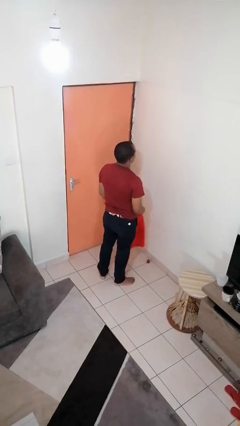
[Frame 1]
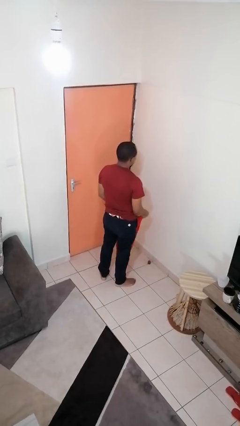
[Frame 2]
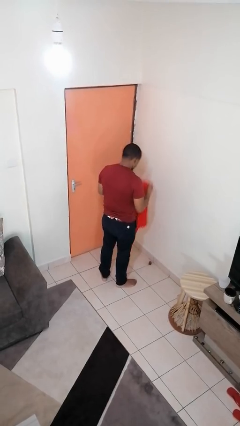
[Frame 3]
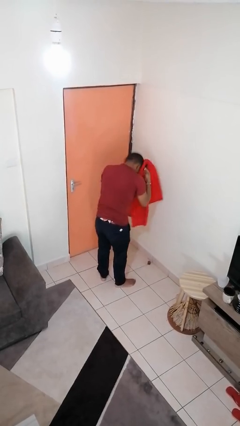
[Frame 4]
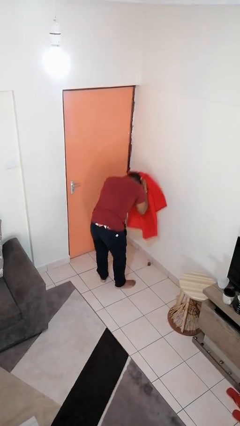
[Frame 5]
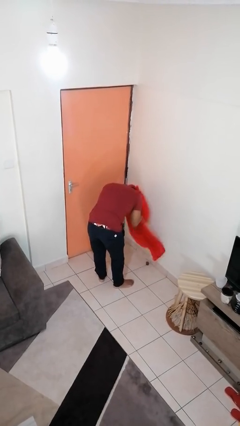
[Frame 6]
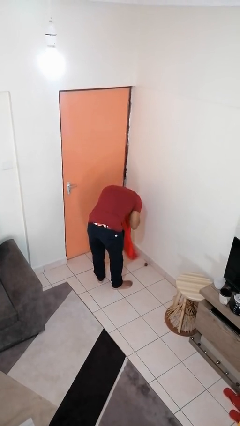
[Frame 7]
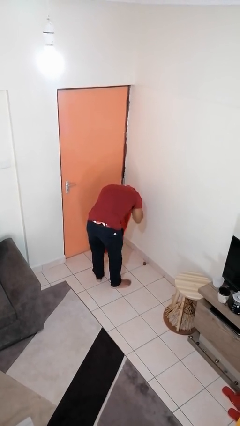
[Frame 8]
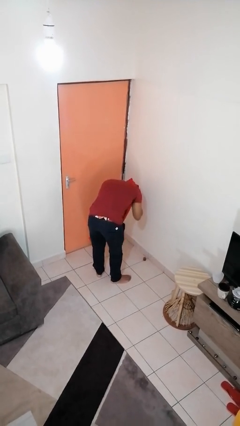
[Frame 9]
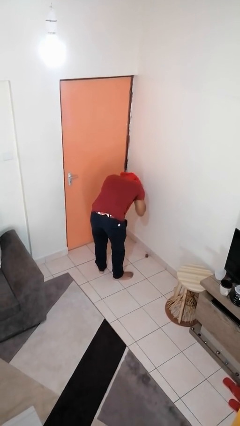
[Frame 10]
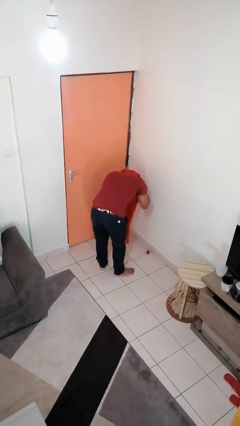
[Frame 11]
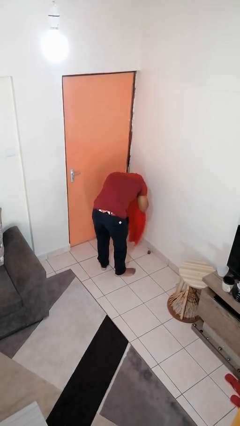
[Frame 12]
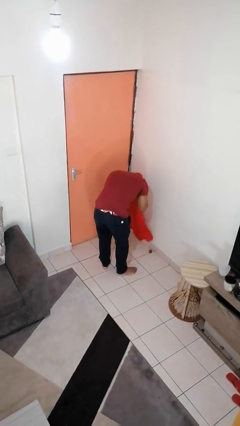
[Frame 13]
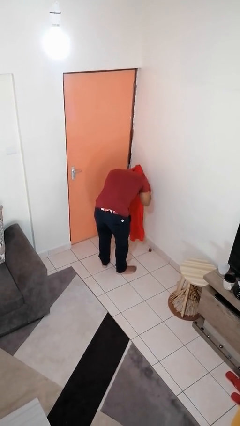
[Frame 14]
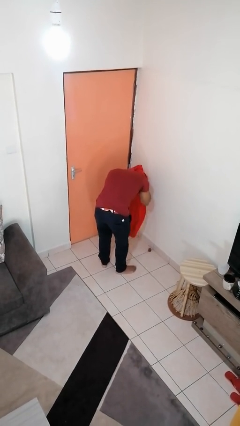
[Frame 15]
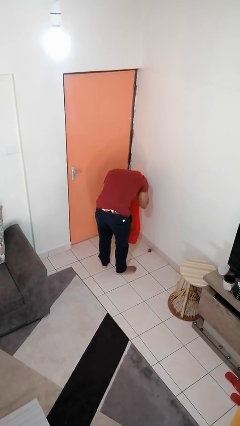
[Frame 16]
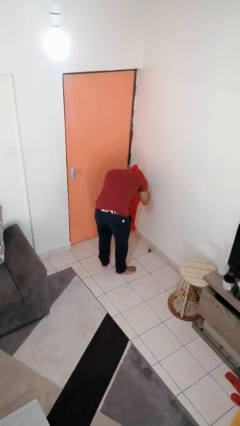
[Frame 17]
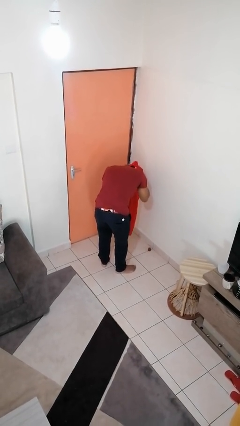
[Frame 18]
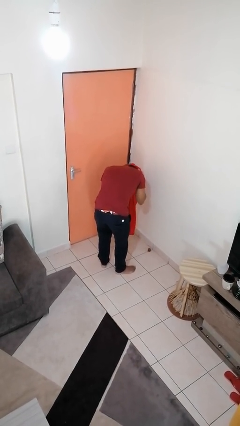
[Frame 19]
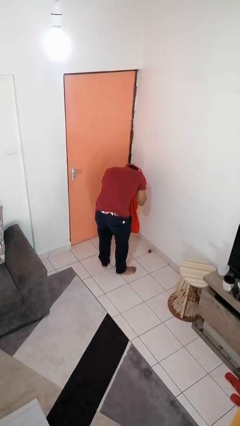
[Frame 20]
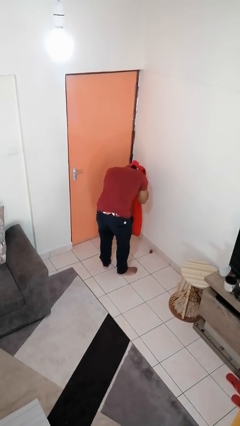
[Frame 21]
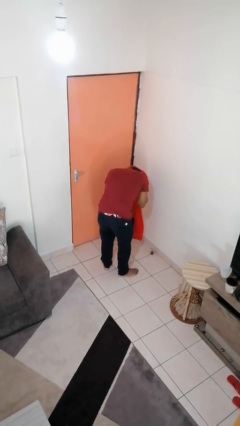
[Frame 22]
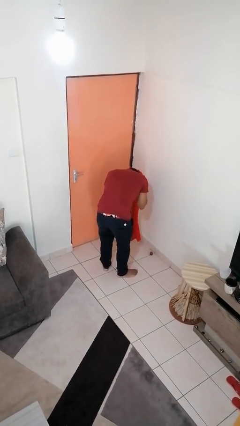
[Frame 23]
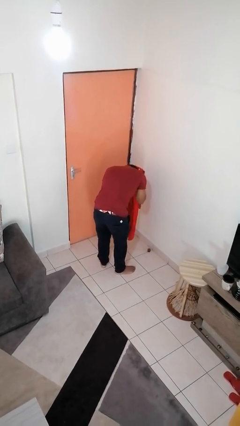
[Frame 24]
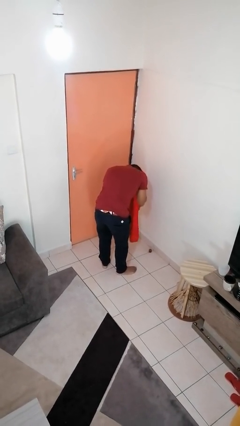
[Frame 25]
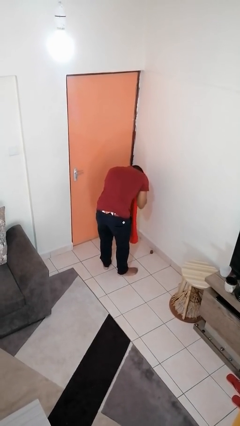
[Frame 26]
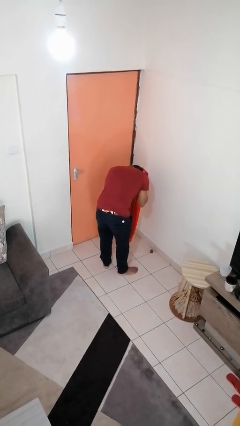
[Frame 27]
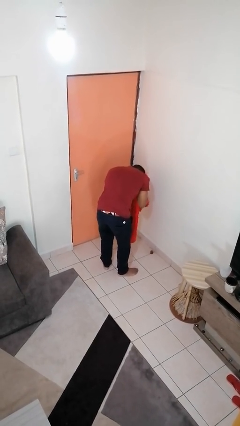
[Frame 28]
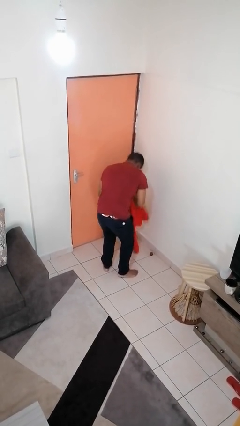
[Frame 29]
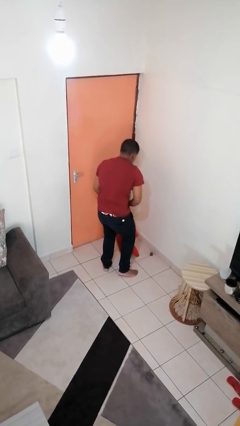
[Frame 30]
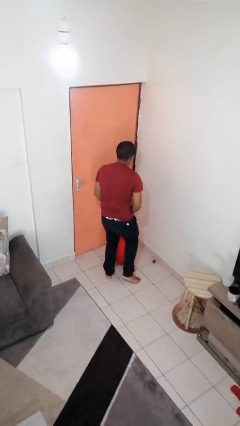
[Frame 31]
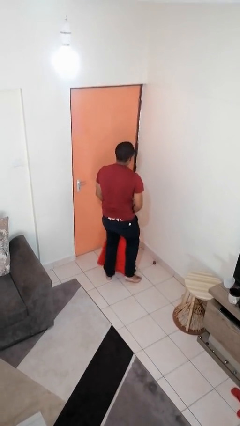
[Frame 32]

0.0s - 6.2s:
person dries hair with towel

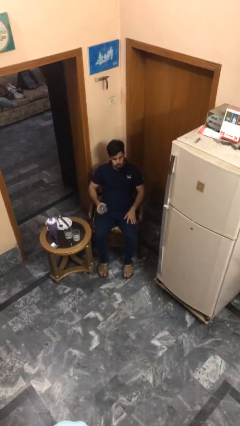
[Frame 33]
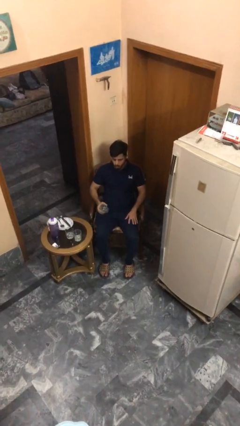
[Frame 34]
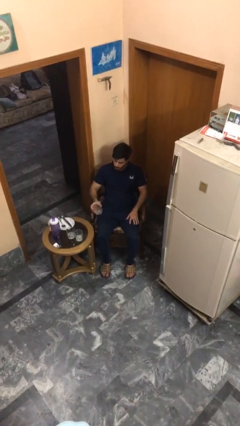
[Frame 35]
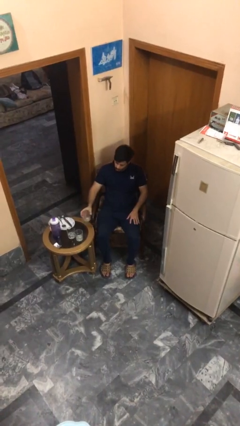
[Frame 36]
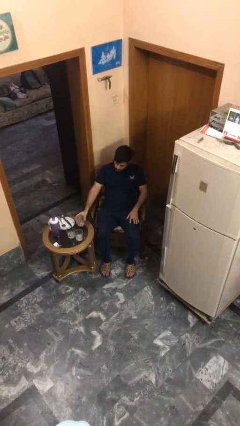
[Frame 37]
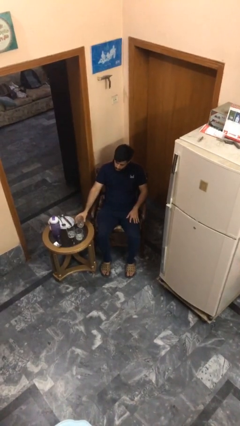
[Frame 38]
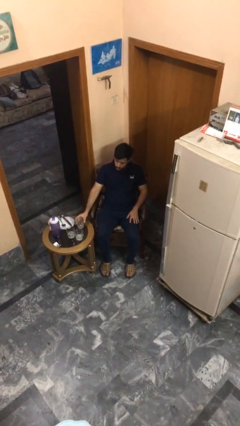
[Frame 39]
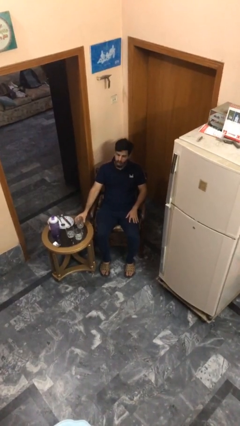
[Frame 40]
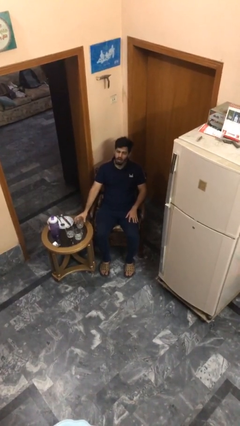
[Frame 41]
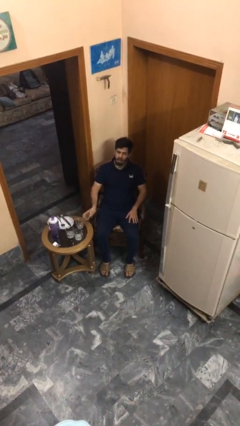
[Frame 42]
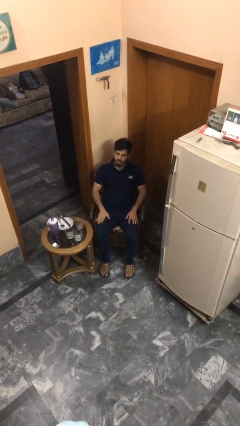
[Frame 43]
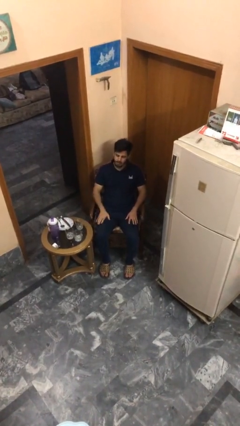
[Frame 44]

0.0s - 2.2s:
person puts down object on table

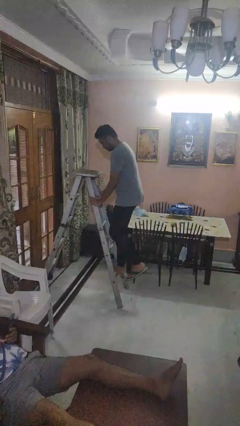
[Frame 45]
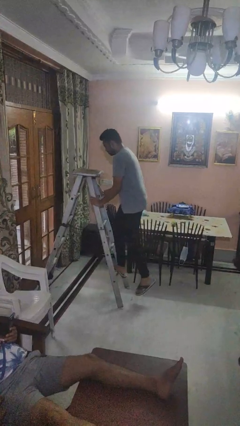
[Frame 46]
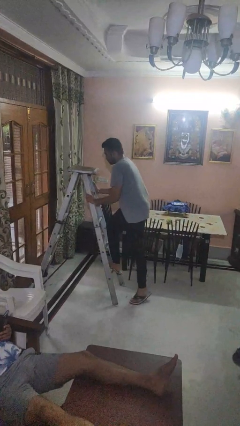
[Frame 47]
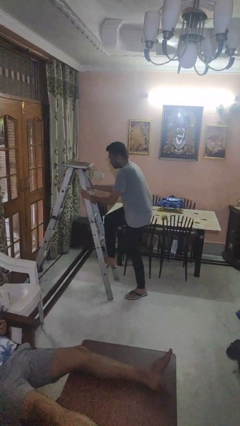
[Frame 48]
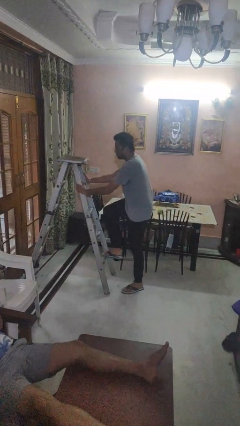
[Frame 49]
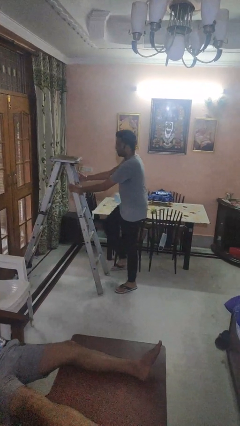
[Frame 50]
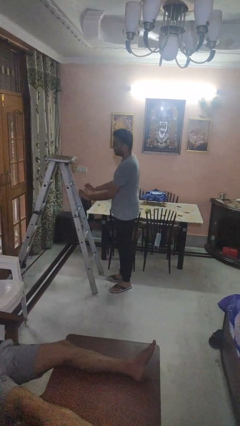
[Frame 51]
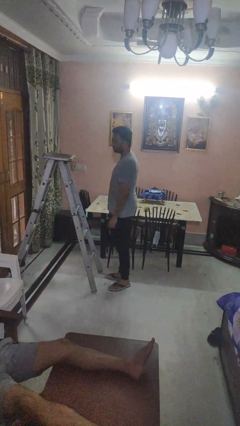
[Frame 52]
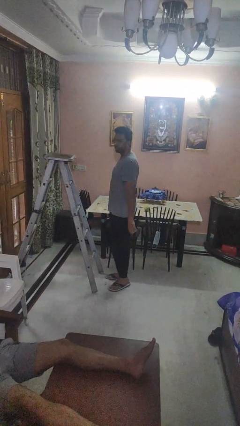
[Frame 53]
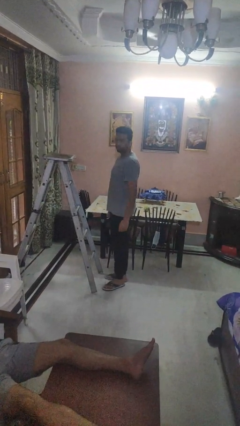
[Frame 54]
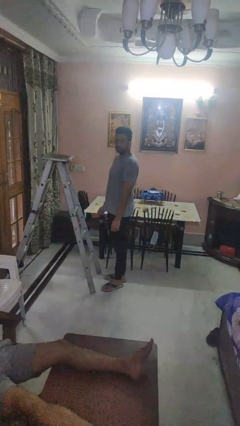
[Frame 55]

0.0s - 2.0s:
person climbs down ladder

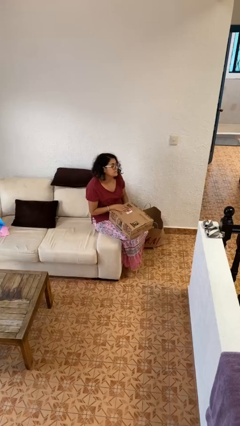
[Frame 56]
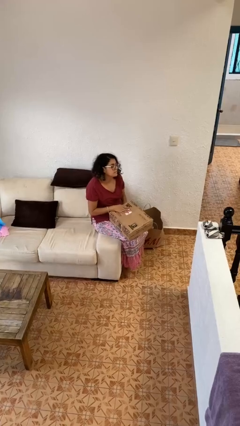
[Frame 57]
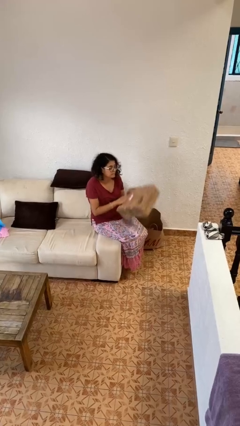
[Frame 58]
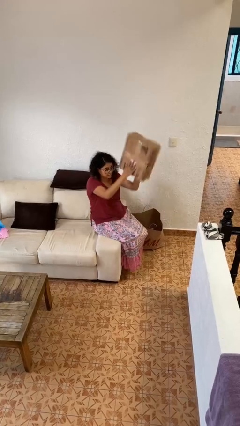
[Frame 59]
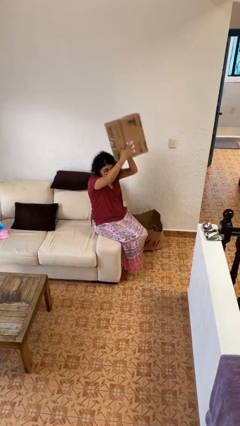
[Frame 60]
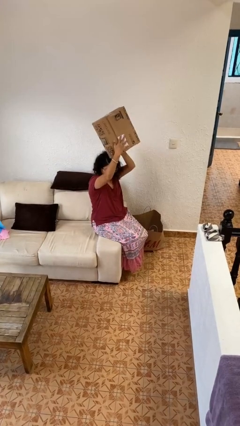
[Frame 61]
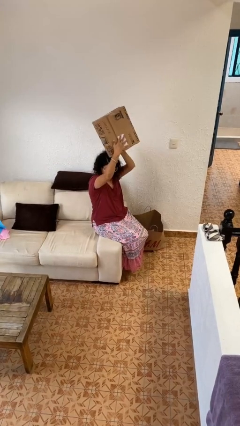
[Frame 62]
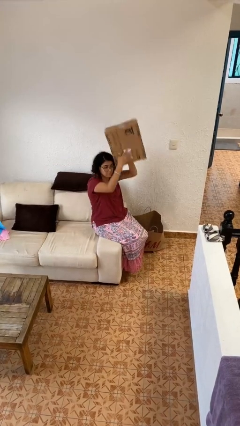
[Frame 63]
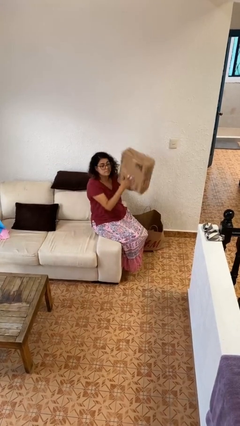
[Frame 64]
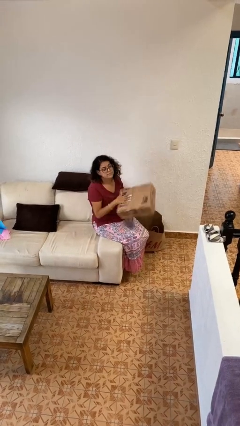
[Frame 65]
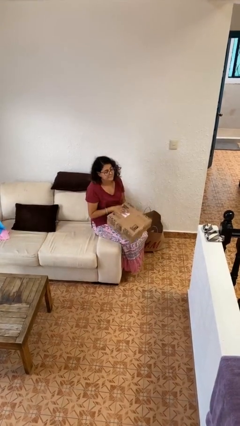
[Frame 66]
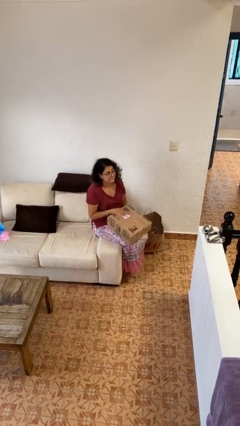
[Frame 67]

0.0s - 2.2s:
person holds object above head

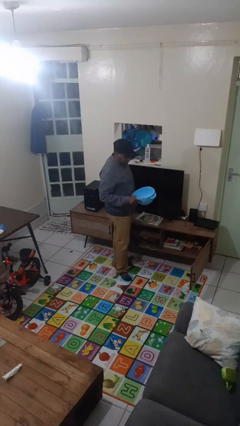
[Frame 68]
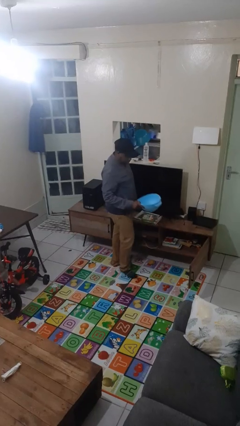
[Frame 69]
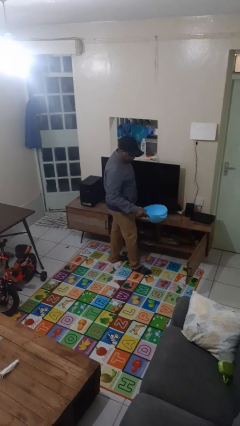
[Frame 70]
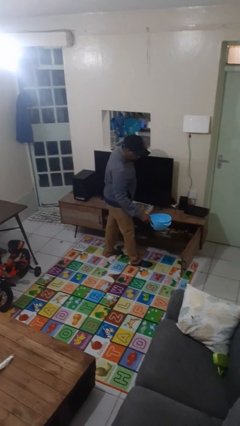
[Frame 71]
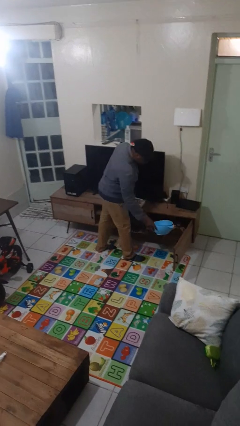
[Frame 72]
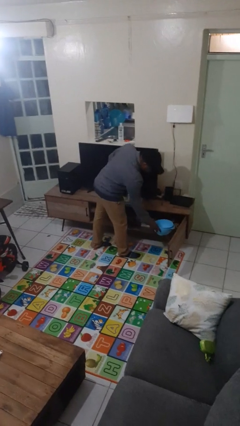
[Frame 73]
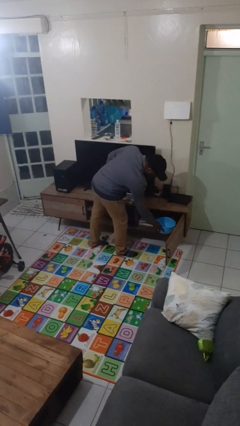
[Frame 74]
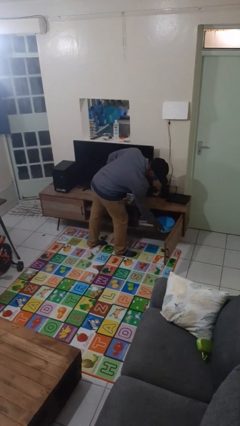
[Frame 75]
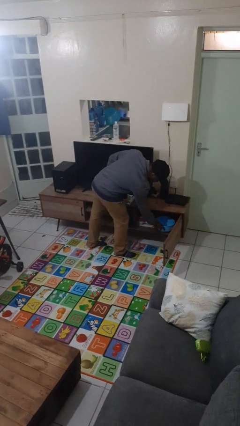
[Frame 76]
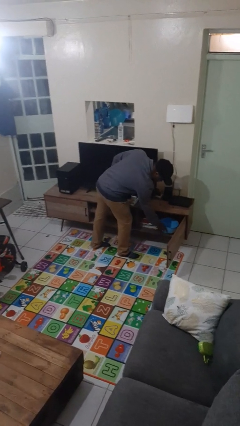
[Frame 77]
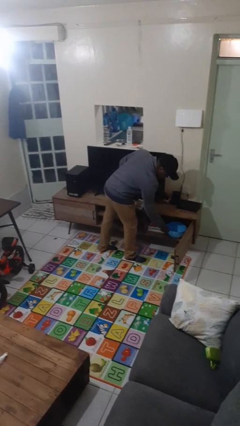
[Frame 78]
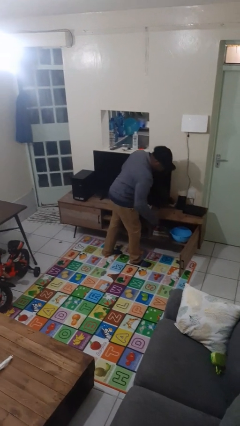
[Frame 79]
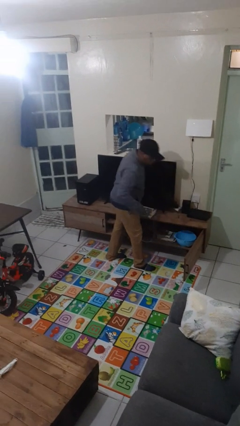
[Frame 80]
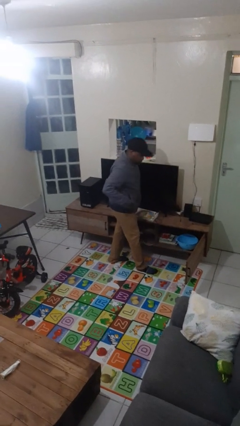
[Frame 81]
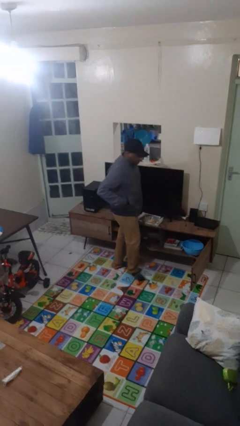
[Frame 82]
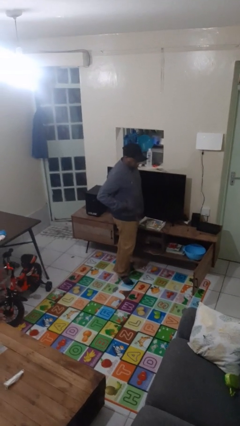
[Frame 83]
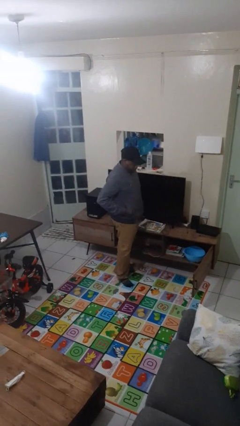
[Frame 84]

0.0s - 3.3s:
person puts down object into cabinet

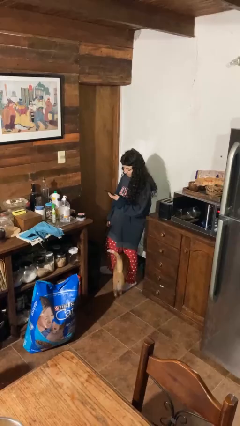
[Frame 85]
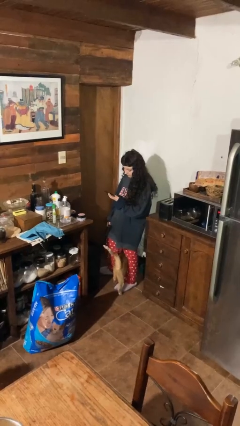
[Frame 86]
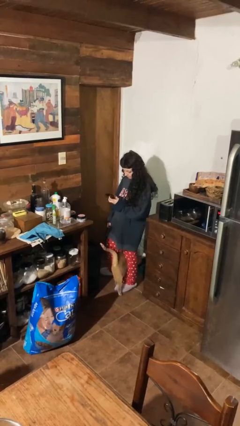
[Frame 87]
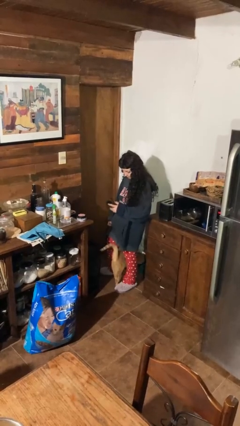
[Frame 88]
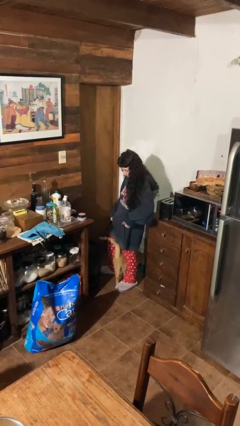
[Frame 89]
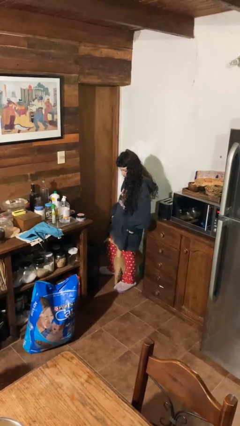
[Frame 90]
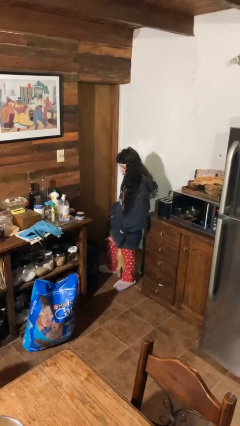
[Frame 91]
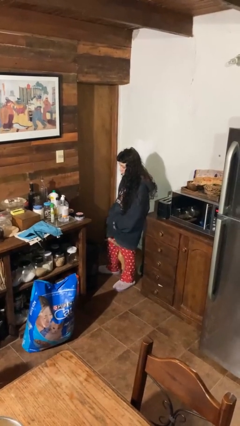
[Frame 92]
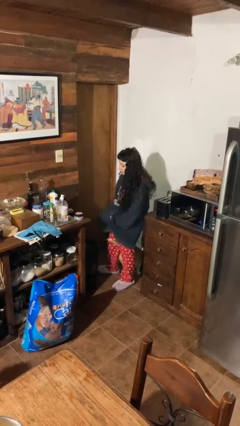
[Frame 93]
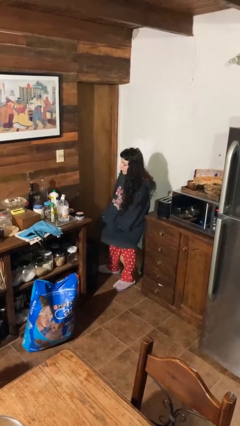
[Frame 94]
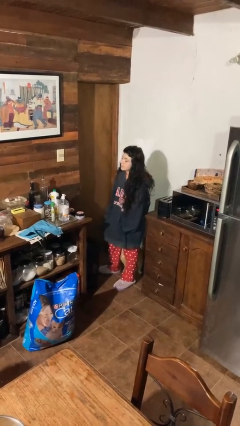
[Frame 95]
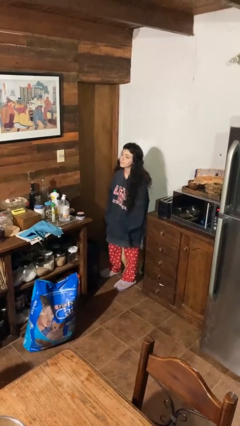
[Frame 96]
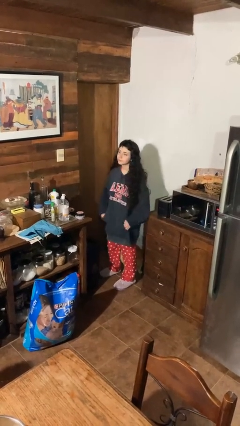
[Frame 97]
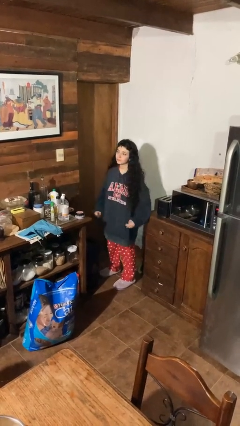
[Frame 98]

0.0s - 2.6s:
person puts phone into pocket
